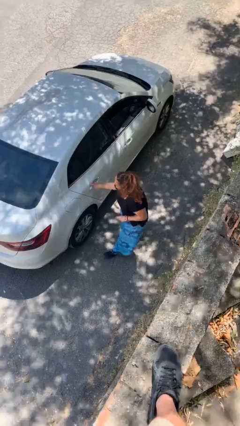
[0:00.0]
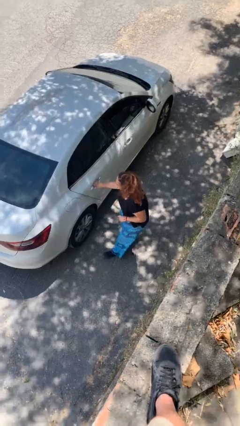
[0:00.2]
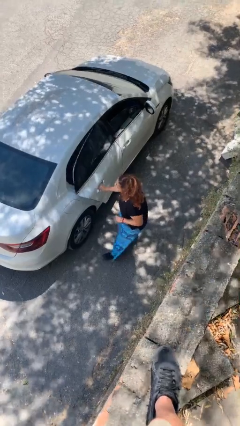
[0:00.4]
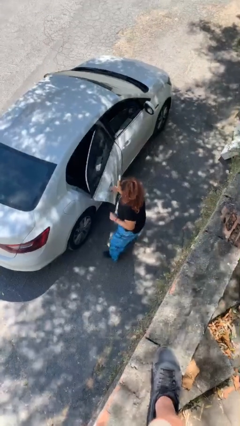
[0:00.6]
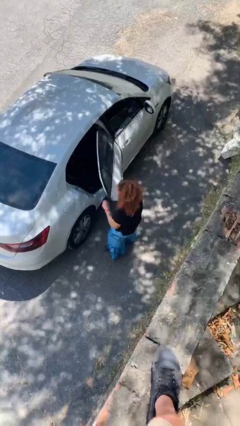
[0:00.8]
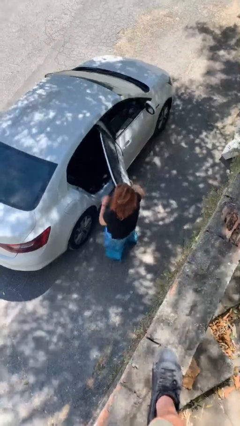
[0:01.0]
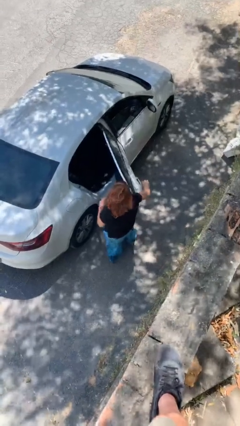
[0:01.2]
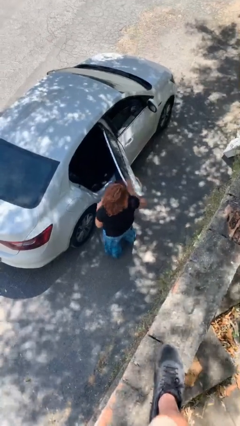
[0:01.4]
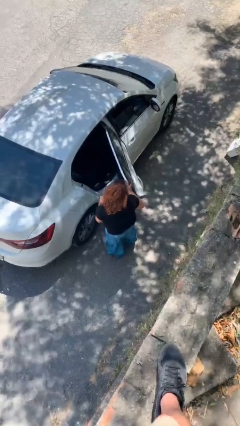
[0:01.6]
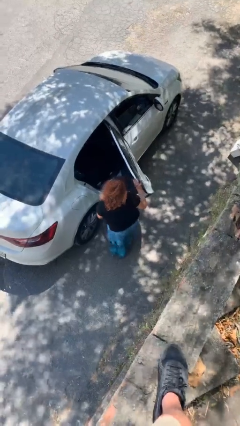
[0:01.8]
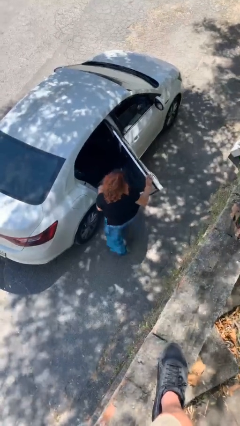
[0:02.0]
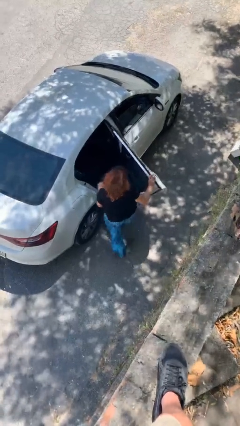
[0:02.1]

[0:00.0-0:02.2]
person opens car door

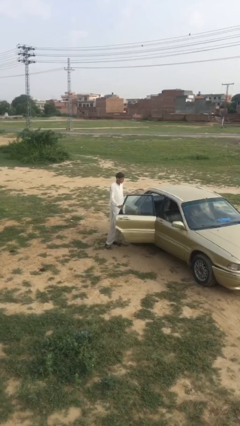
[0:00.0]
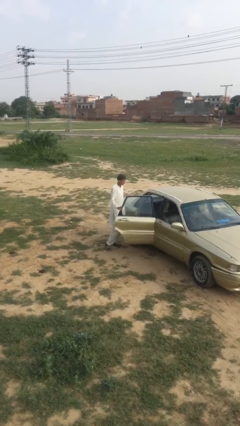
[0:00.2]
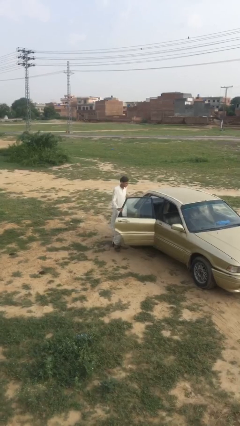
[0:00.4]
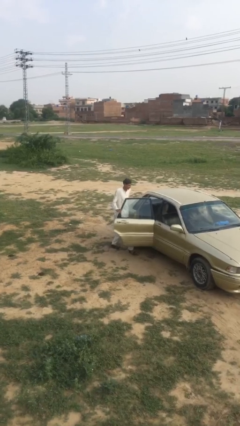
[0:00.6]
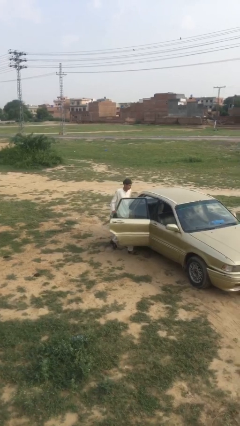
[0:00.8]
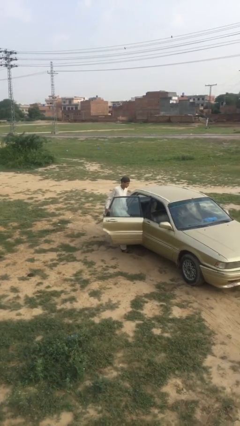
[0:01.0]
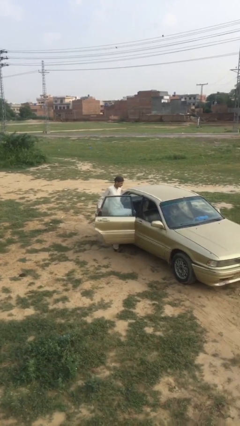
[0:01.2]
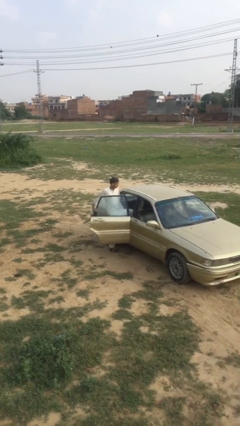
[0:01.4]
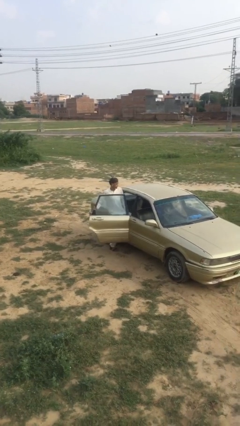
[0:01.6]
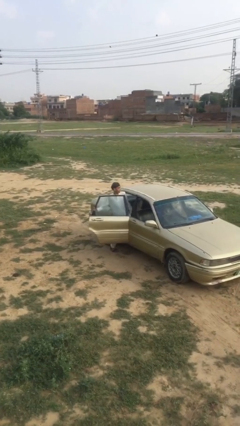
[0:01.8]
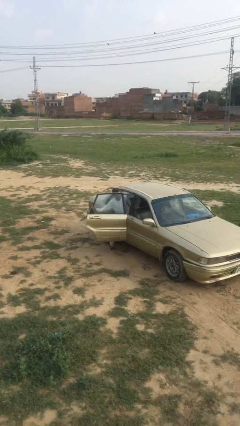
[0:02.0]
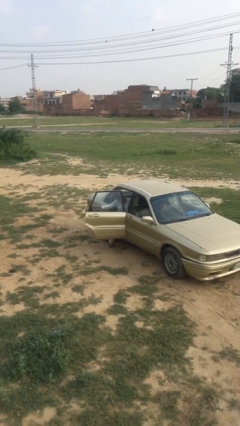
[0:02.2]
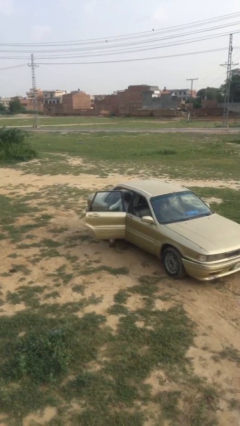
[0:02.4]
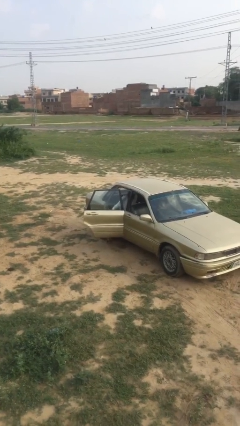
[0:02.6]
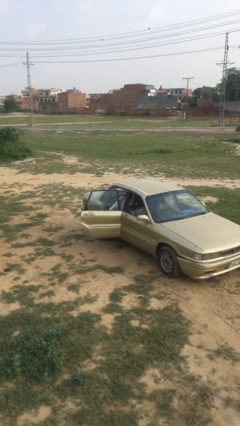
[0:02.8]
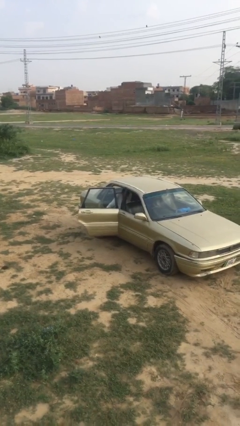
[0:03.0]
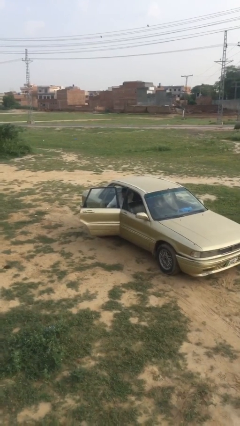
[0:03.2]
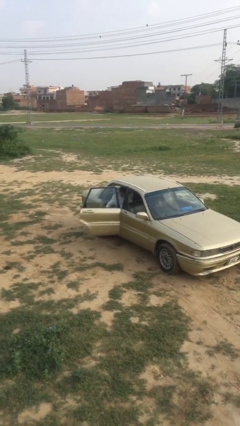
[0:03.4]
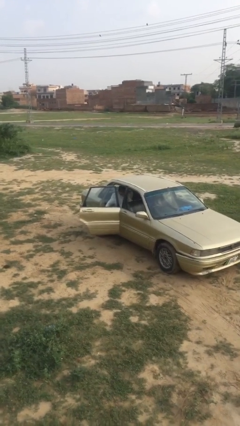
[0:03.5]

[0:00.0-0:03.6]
person enters car

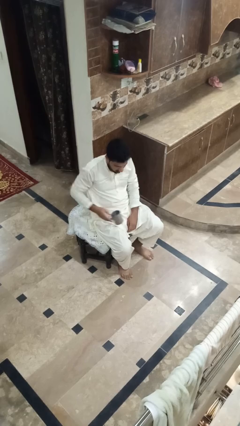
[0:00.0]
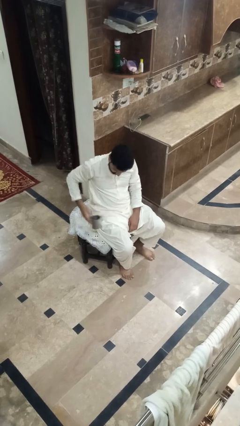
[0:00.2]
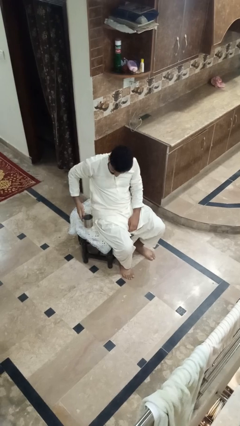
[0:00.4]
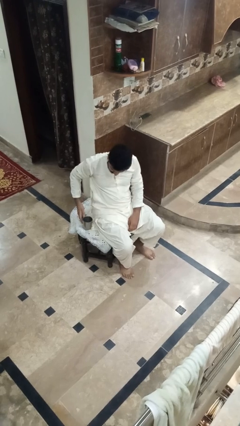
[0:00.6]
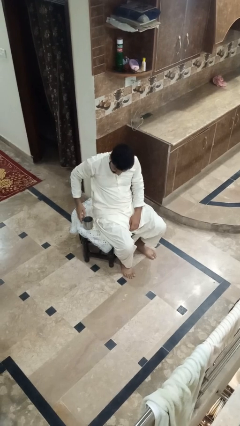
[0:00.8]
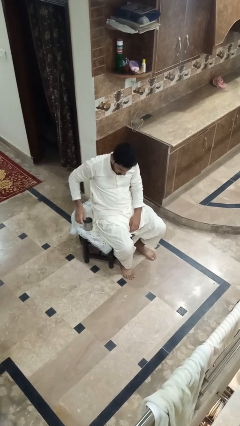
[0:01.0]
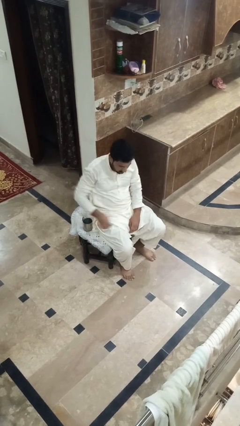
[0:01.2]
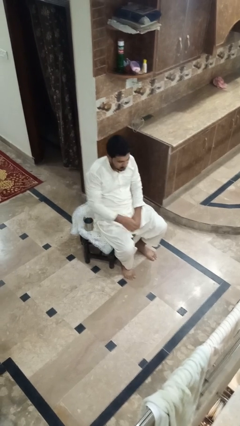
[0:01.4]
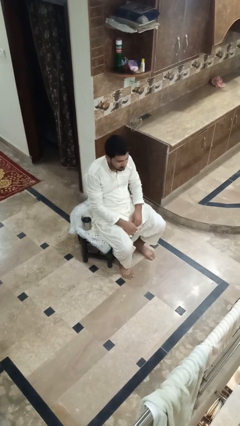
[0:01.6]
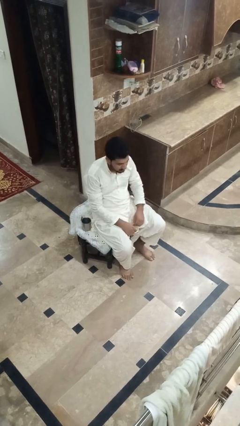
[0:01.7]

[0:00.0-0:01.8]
person puts down object on table

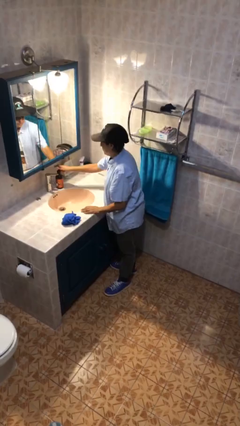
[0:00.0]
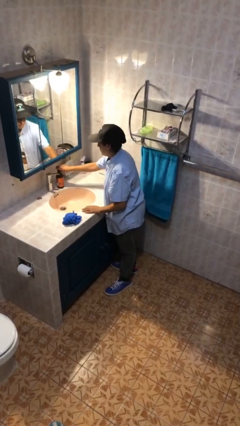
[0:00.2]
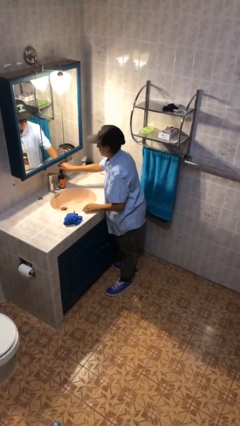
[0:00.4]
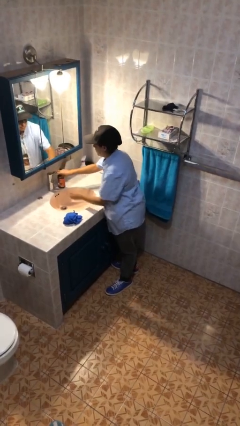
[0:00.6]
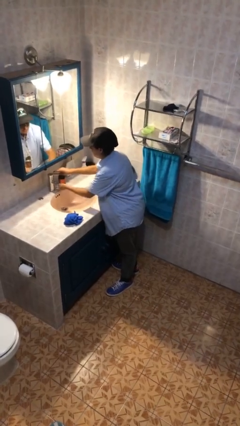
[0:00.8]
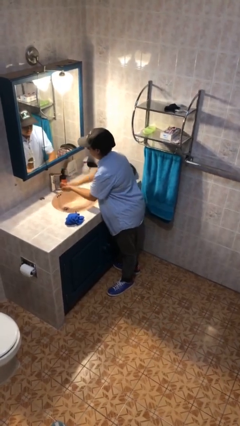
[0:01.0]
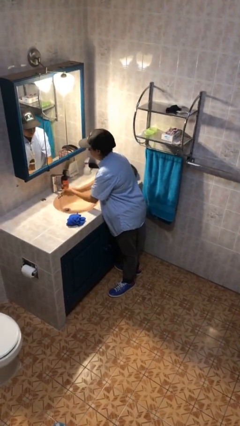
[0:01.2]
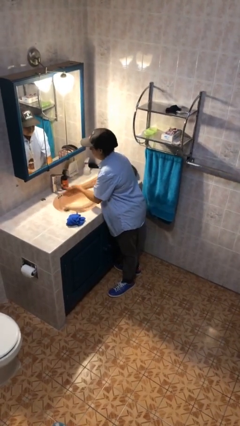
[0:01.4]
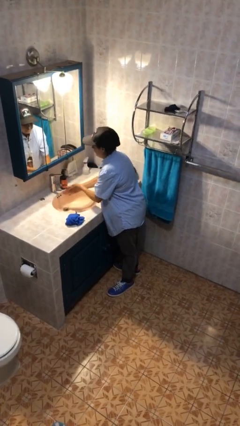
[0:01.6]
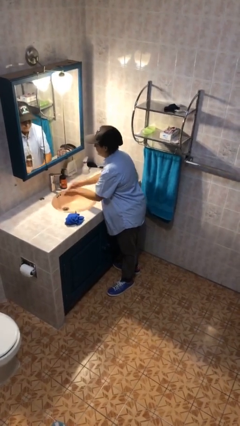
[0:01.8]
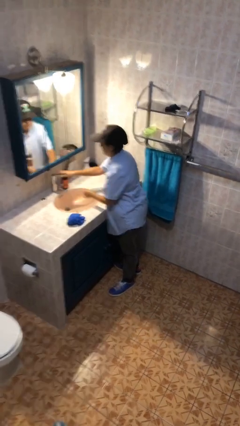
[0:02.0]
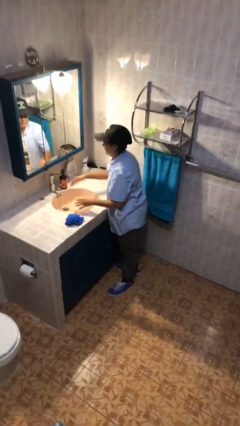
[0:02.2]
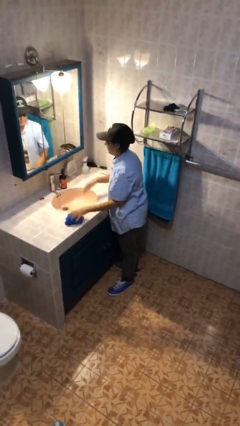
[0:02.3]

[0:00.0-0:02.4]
person washes hands

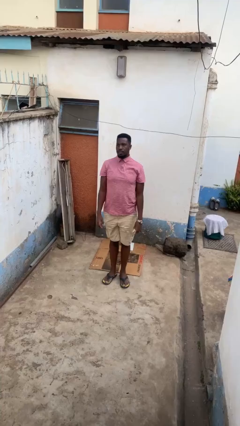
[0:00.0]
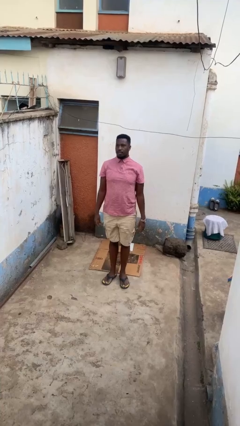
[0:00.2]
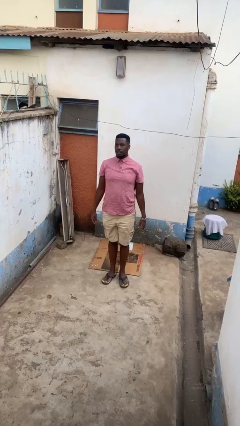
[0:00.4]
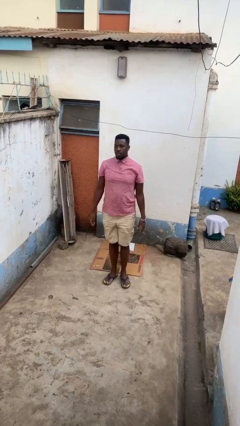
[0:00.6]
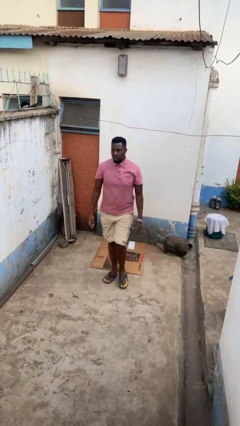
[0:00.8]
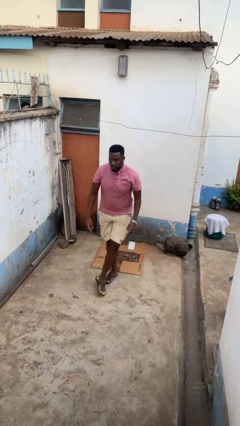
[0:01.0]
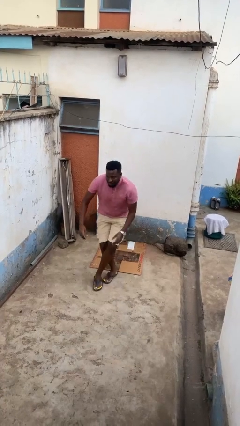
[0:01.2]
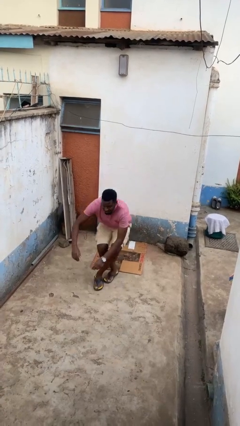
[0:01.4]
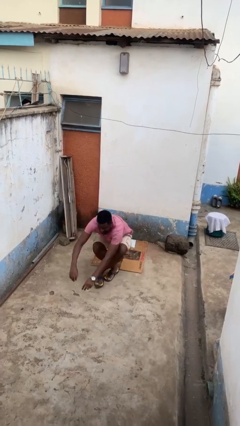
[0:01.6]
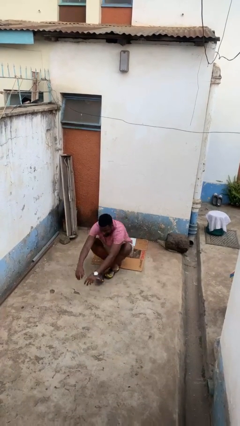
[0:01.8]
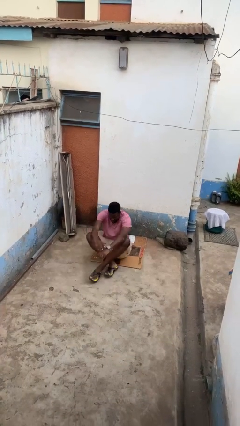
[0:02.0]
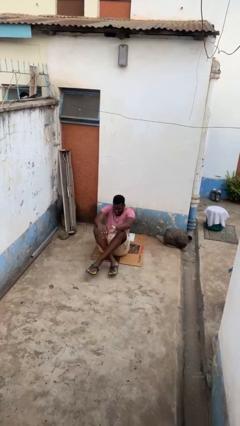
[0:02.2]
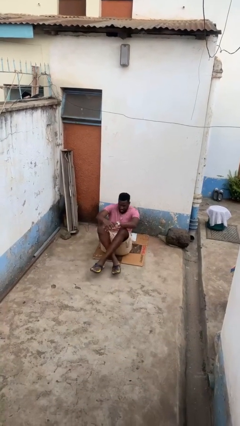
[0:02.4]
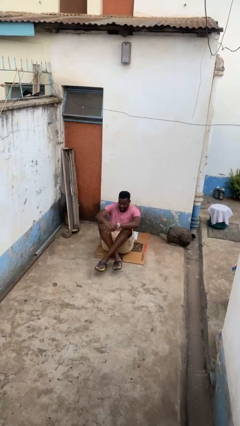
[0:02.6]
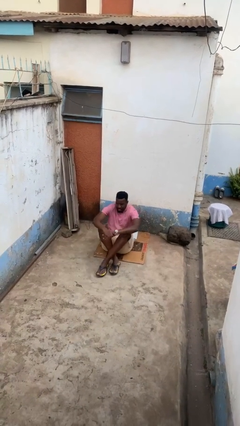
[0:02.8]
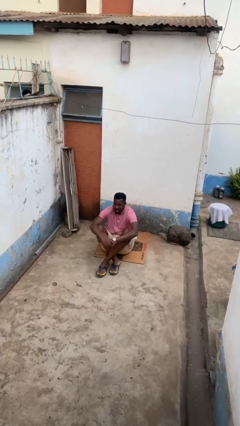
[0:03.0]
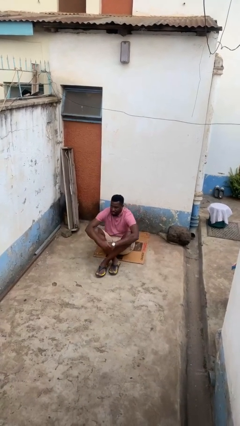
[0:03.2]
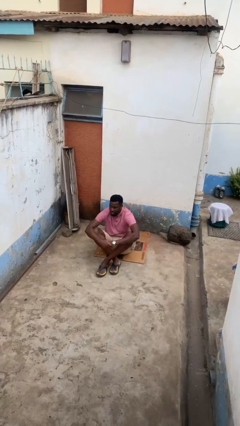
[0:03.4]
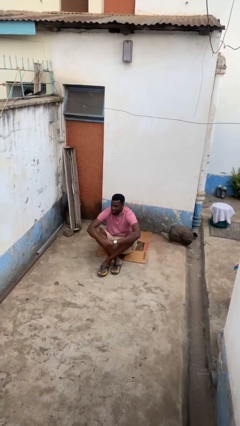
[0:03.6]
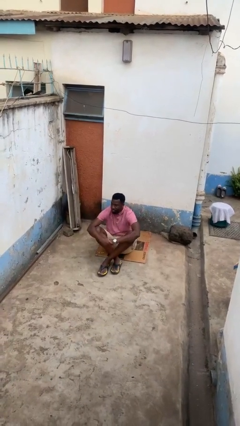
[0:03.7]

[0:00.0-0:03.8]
person sits crisscross

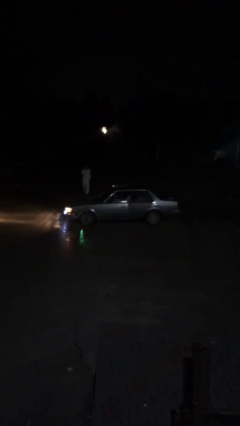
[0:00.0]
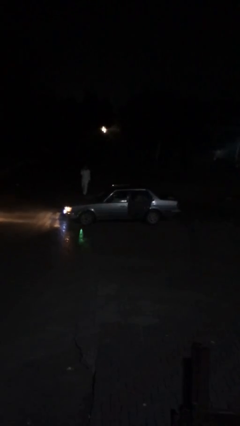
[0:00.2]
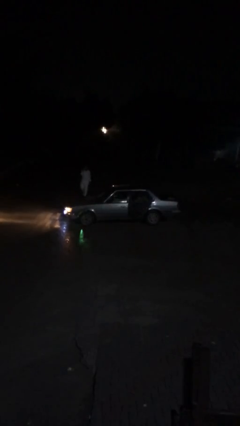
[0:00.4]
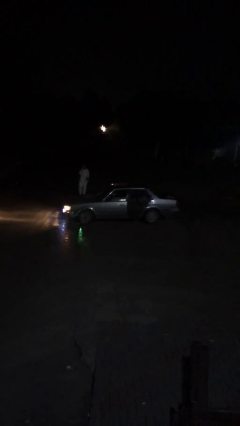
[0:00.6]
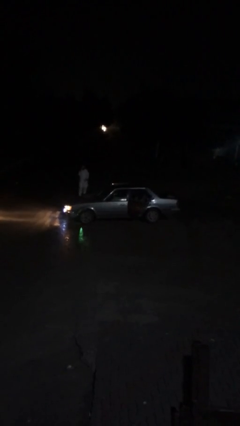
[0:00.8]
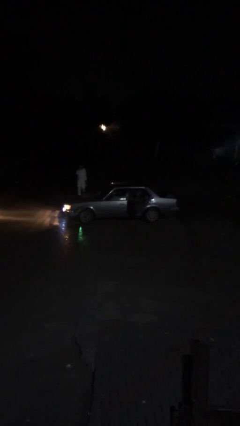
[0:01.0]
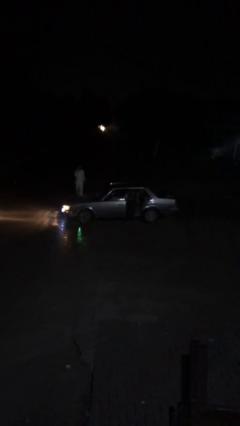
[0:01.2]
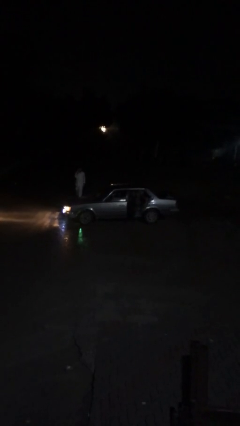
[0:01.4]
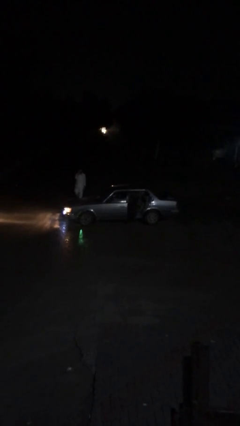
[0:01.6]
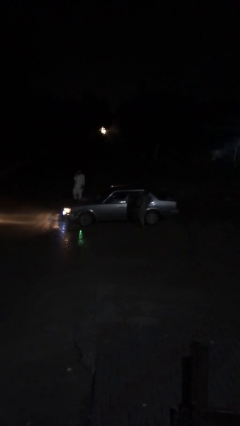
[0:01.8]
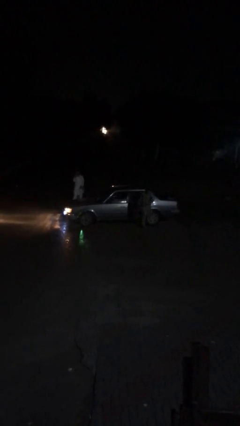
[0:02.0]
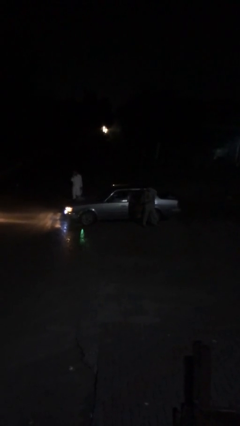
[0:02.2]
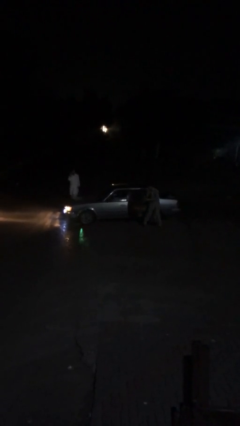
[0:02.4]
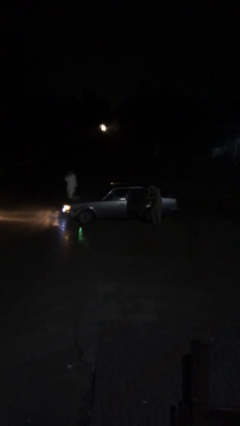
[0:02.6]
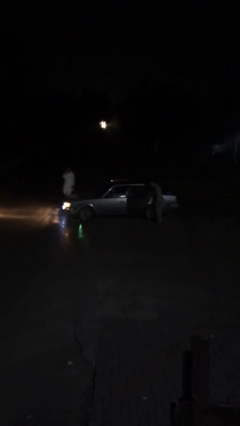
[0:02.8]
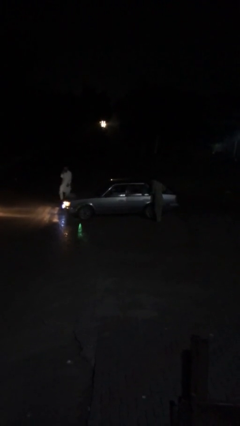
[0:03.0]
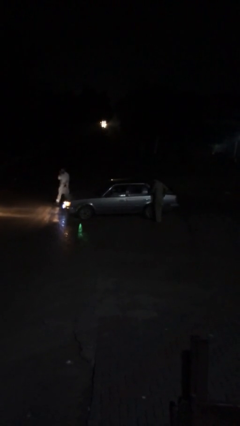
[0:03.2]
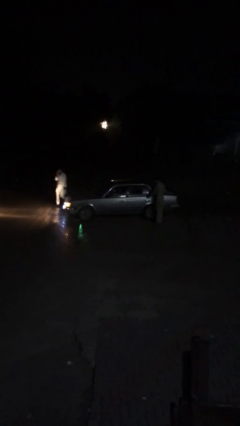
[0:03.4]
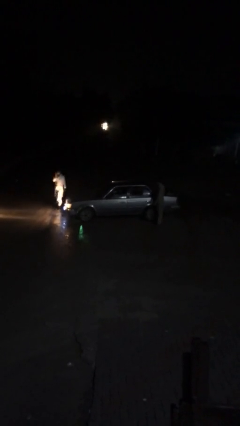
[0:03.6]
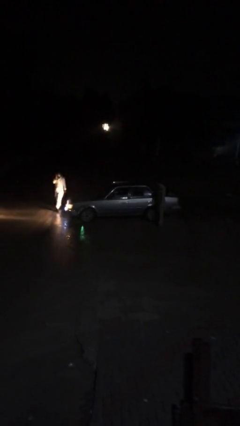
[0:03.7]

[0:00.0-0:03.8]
car drops off person
